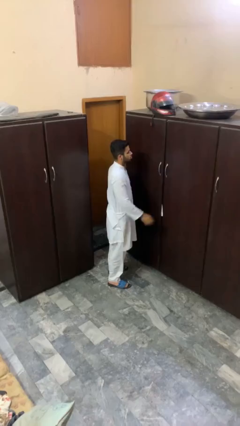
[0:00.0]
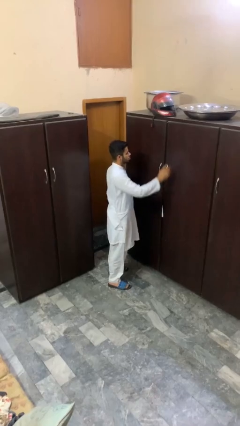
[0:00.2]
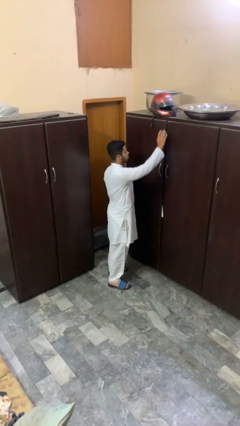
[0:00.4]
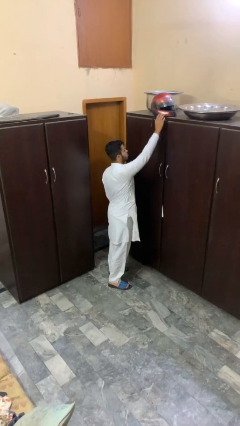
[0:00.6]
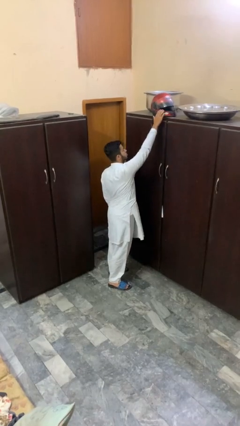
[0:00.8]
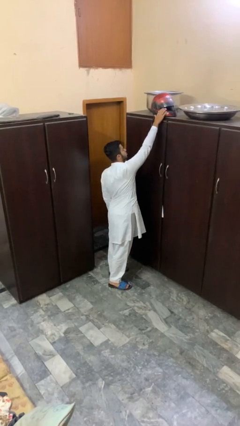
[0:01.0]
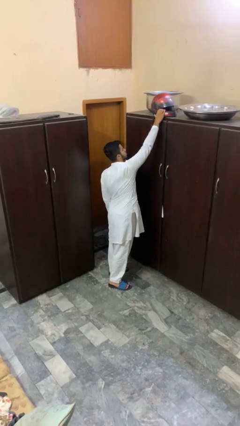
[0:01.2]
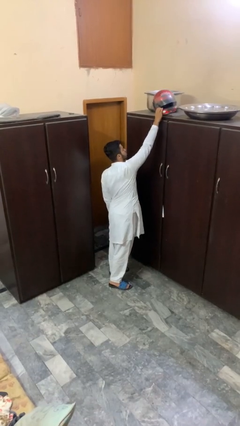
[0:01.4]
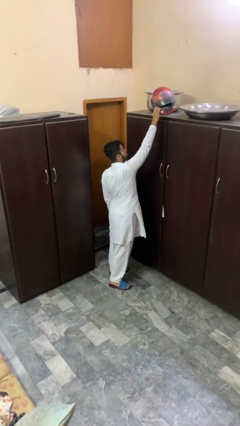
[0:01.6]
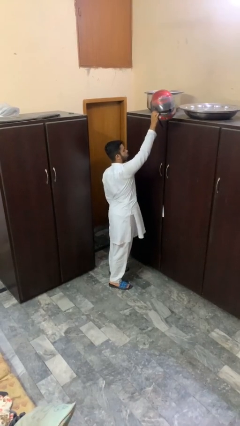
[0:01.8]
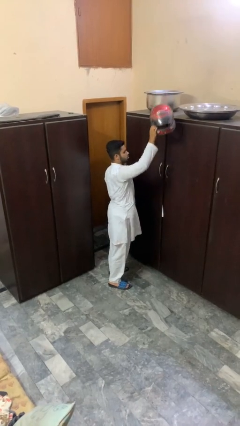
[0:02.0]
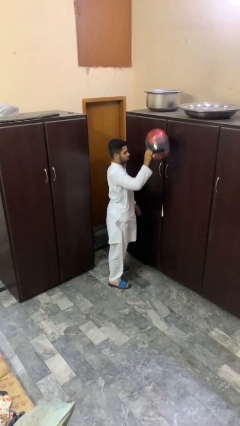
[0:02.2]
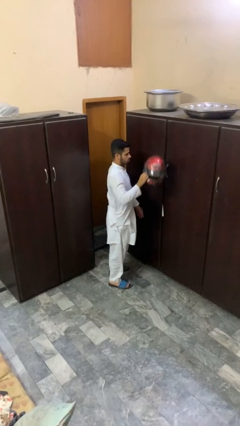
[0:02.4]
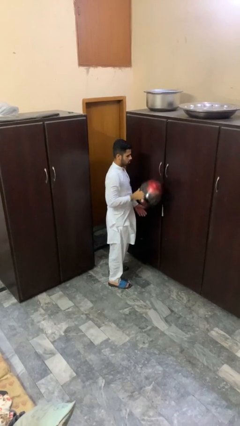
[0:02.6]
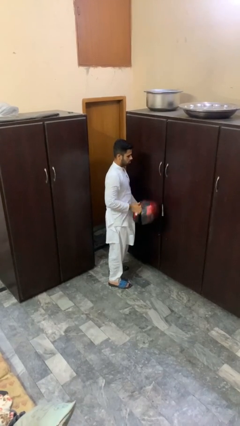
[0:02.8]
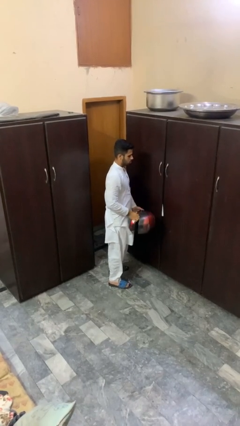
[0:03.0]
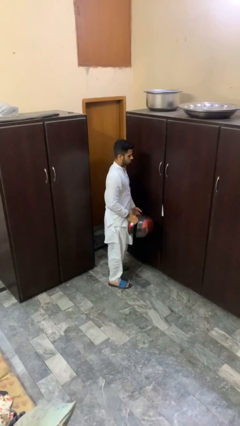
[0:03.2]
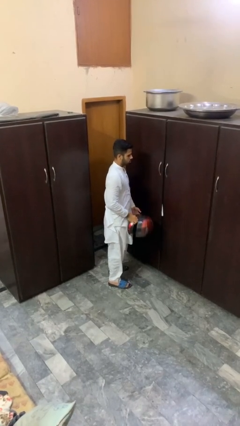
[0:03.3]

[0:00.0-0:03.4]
person picks up object from shelf

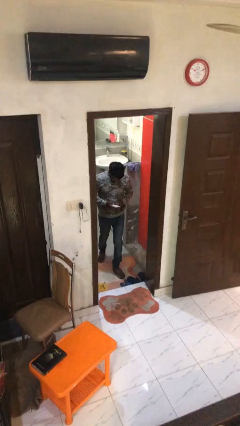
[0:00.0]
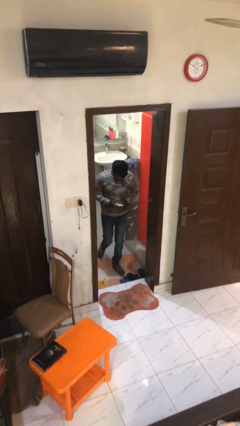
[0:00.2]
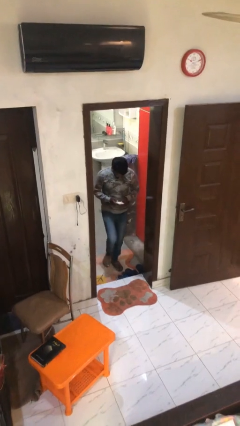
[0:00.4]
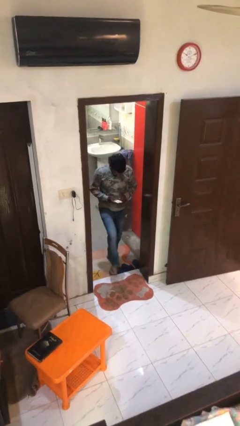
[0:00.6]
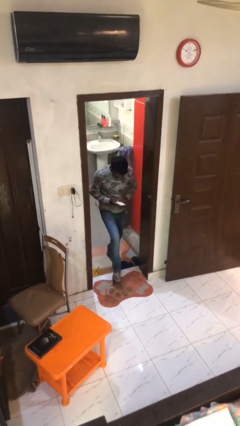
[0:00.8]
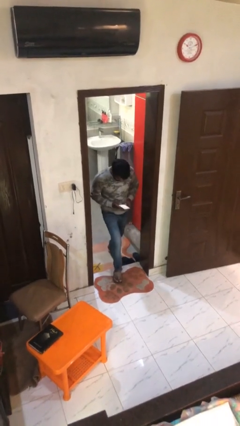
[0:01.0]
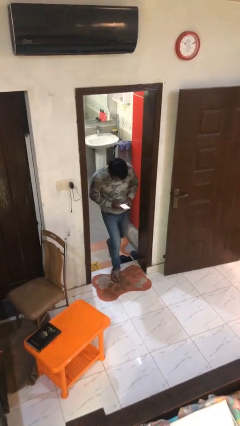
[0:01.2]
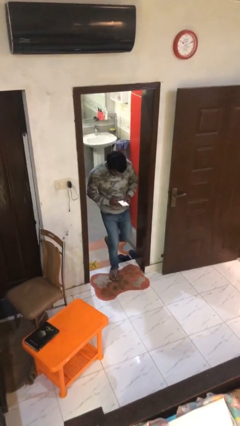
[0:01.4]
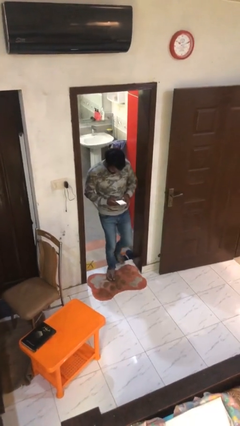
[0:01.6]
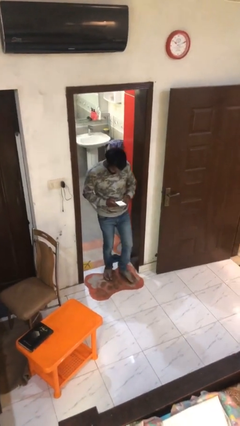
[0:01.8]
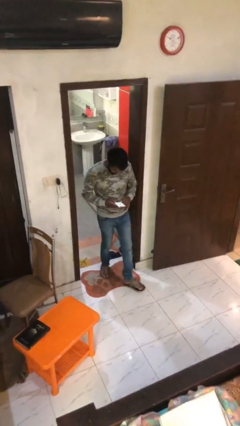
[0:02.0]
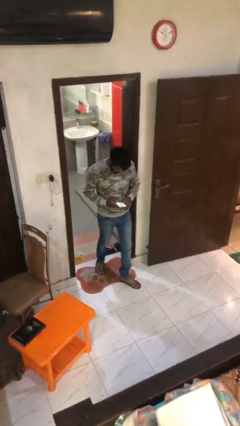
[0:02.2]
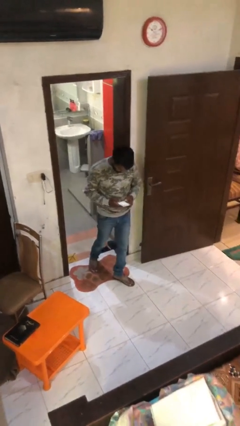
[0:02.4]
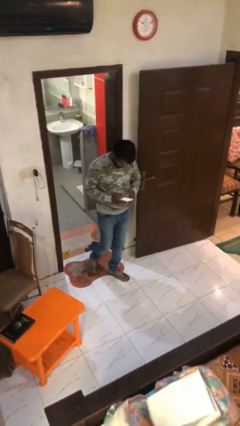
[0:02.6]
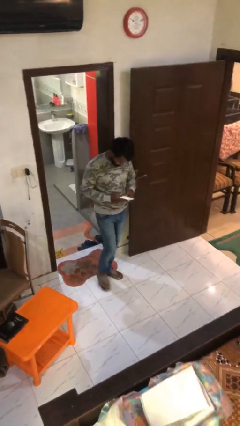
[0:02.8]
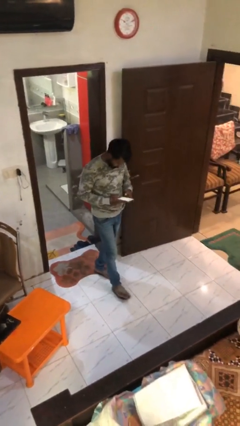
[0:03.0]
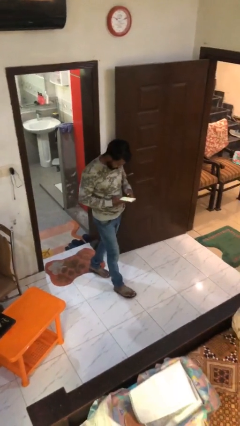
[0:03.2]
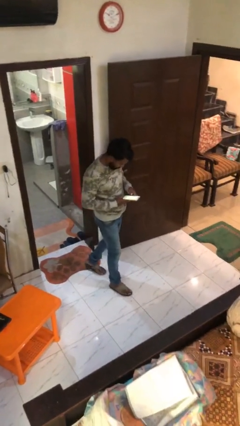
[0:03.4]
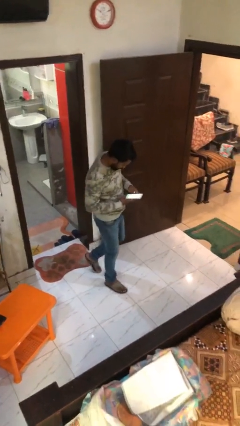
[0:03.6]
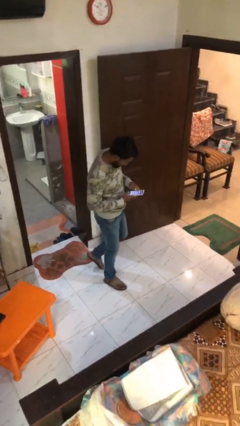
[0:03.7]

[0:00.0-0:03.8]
person enters scene through structure

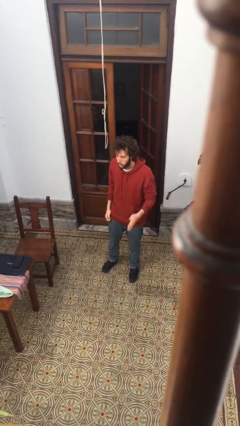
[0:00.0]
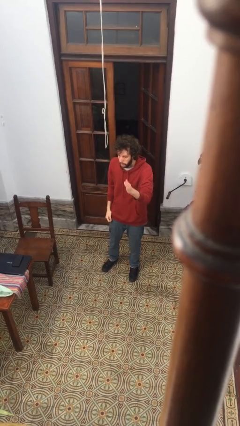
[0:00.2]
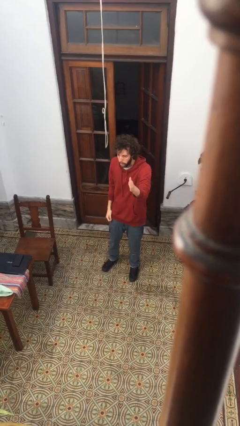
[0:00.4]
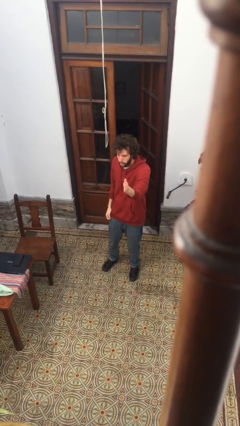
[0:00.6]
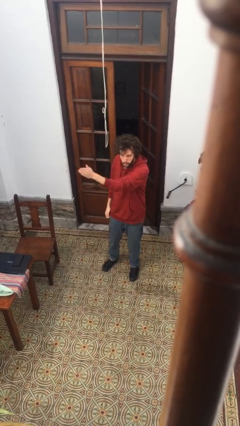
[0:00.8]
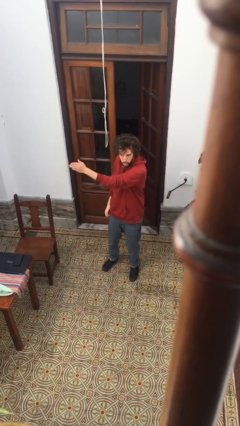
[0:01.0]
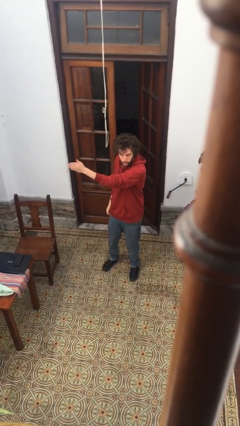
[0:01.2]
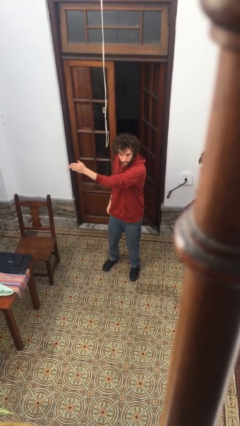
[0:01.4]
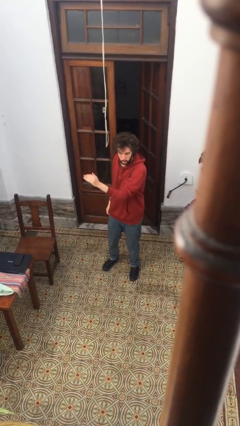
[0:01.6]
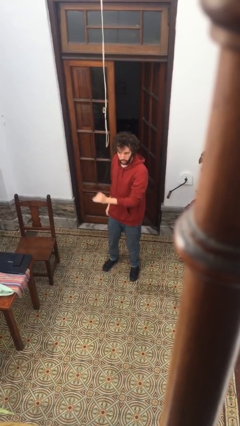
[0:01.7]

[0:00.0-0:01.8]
person gestures swipe right

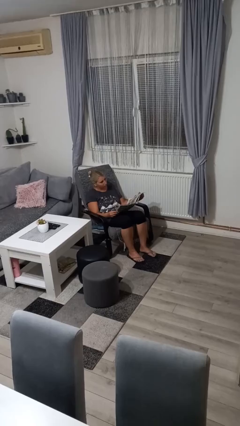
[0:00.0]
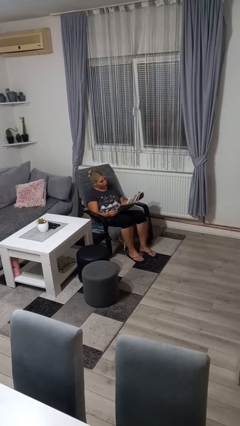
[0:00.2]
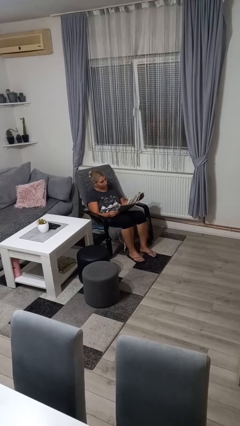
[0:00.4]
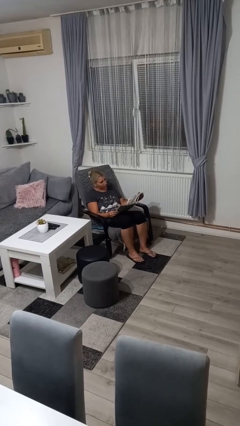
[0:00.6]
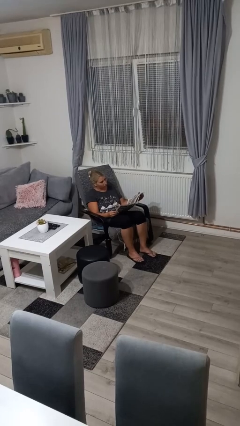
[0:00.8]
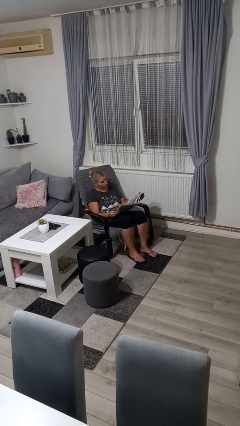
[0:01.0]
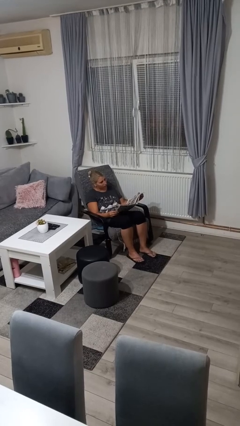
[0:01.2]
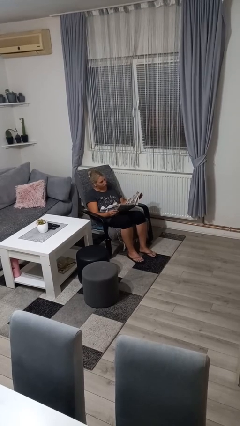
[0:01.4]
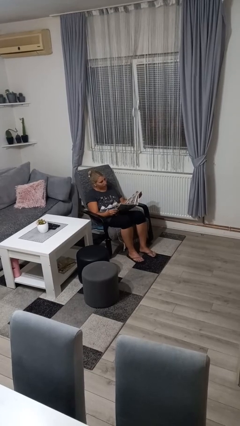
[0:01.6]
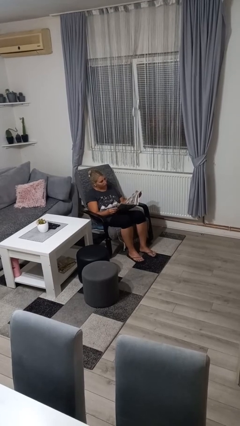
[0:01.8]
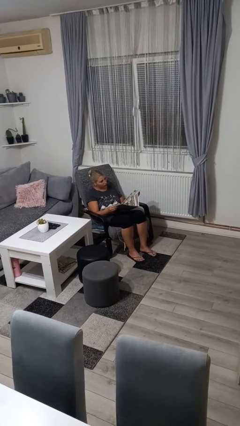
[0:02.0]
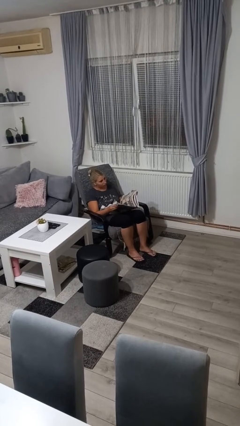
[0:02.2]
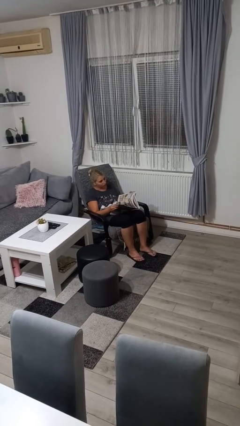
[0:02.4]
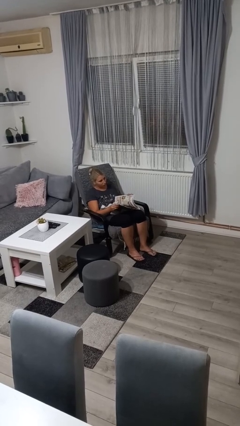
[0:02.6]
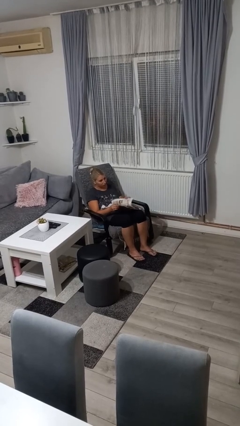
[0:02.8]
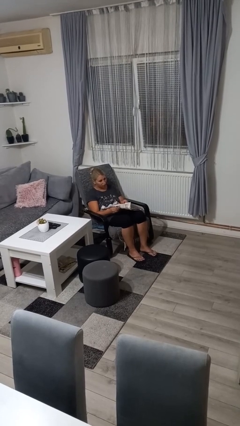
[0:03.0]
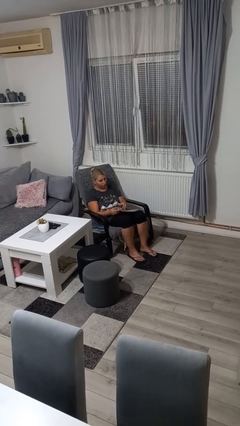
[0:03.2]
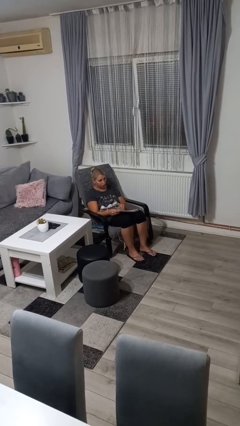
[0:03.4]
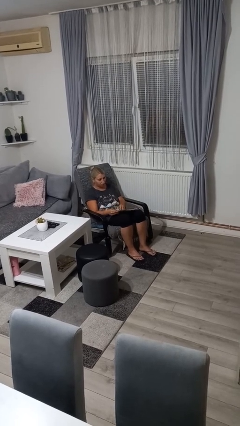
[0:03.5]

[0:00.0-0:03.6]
person reads newspaper

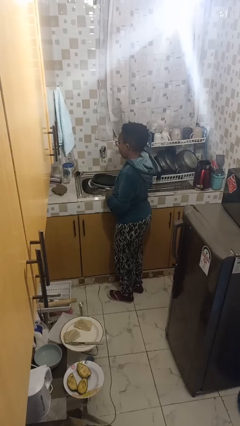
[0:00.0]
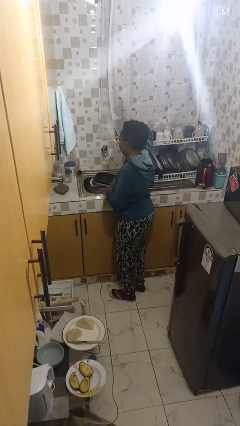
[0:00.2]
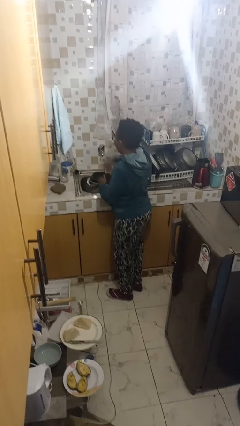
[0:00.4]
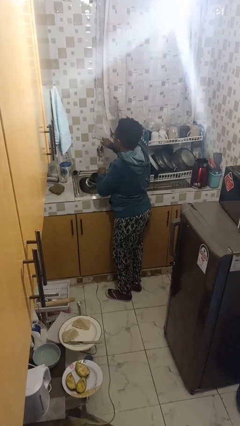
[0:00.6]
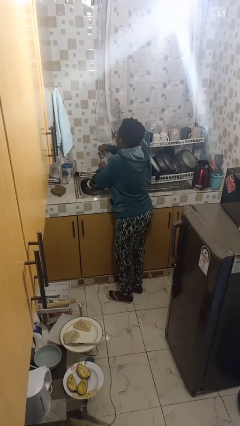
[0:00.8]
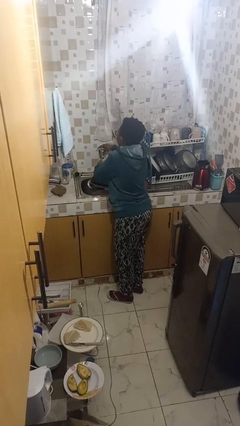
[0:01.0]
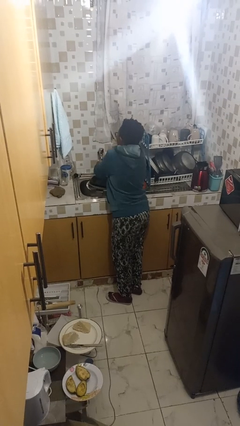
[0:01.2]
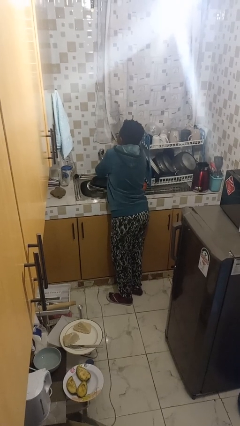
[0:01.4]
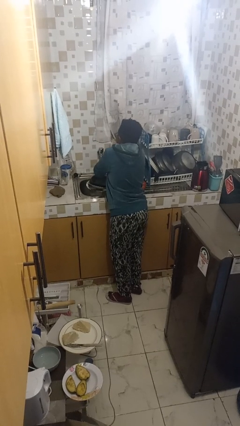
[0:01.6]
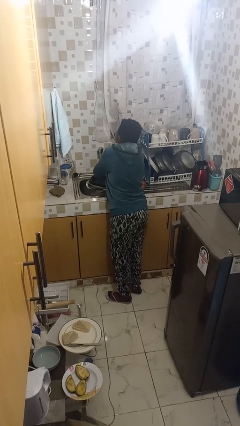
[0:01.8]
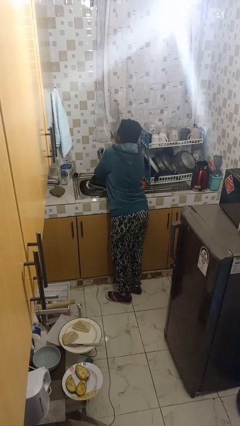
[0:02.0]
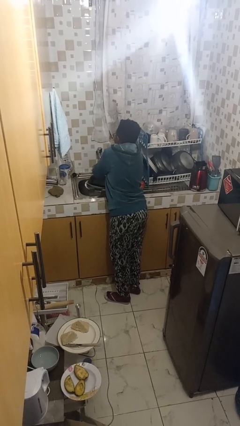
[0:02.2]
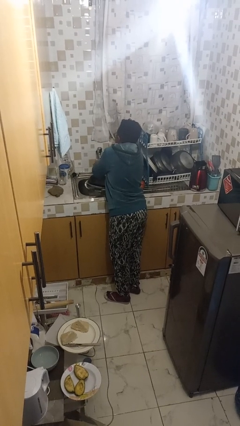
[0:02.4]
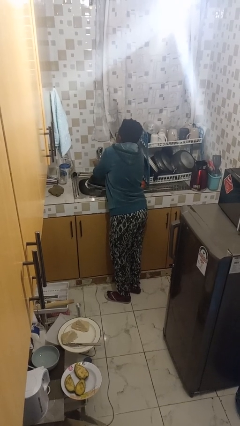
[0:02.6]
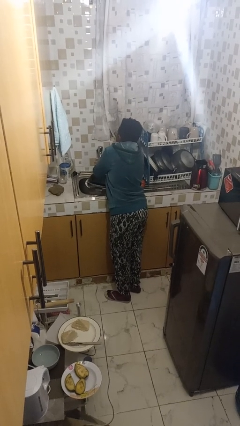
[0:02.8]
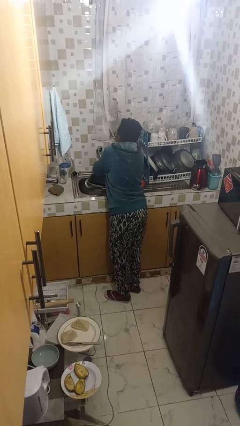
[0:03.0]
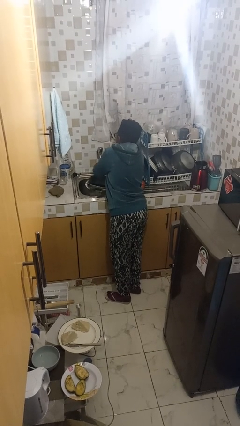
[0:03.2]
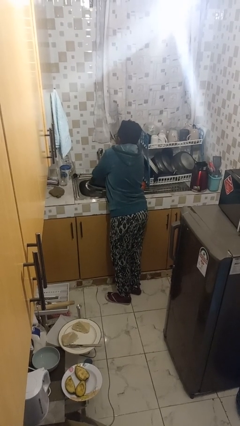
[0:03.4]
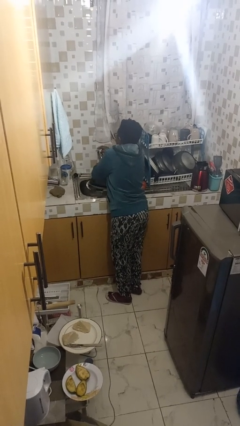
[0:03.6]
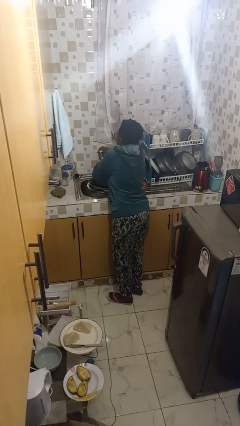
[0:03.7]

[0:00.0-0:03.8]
person washes hands

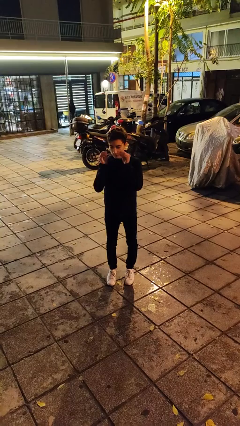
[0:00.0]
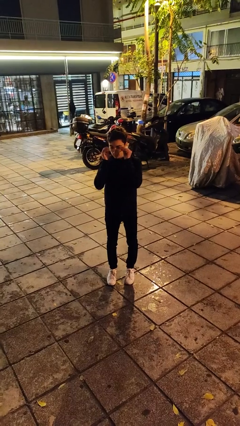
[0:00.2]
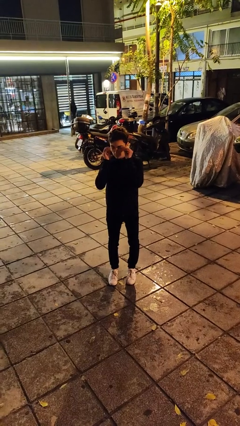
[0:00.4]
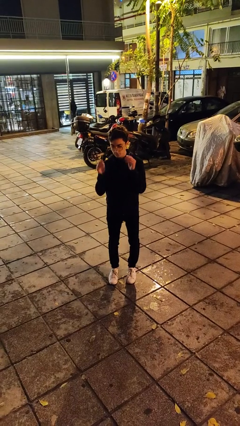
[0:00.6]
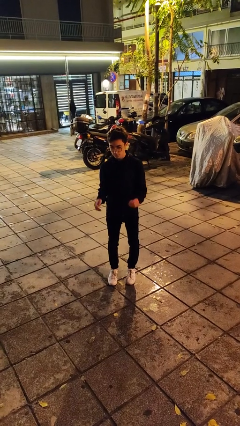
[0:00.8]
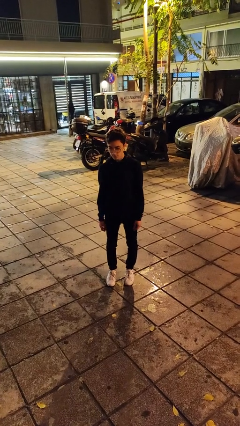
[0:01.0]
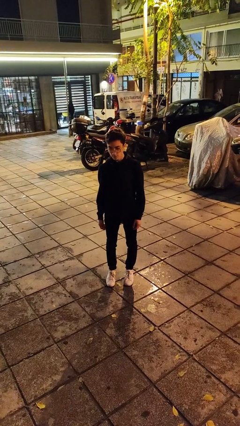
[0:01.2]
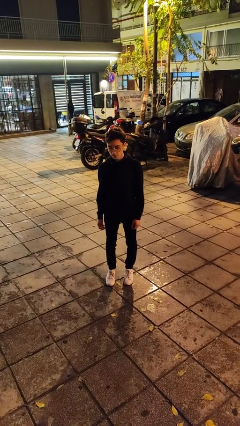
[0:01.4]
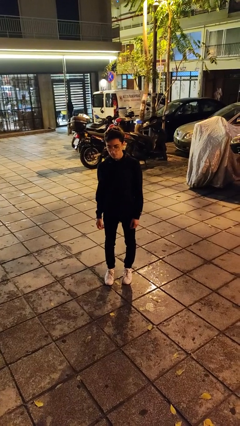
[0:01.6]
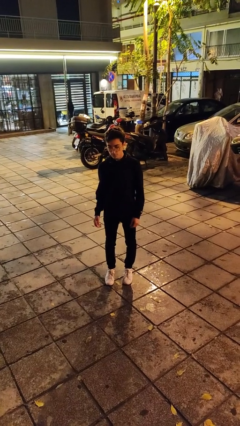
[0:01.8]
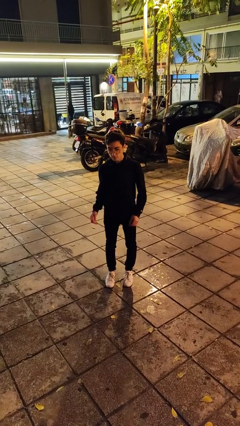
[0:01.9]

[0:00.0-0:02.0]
person puts on glasses
